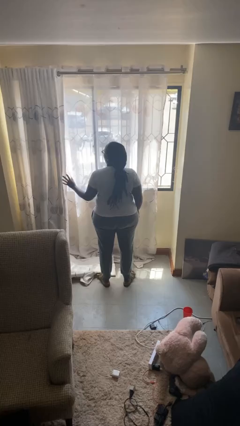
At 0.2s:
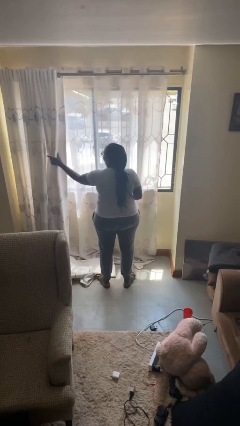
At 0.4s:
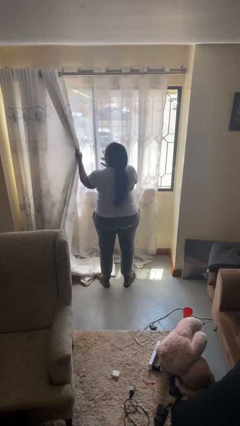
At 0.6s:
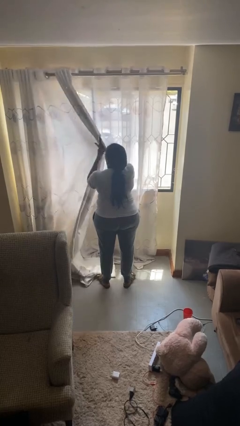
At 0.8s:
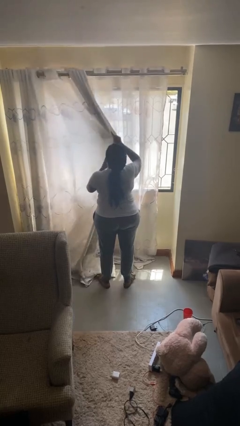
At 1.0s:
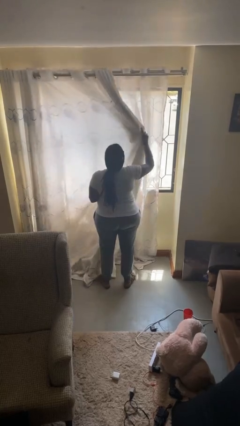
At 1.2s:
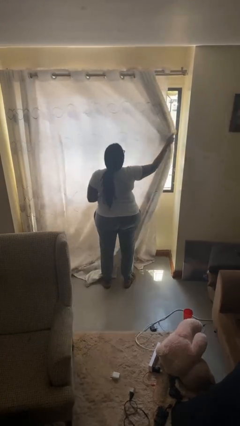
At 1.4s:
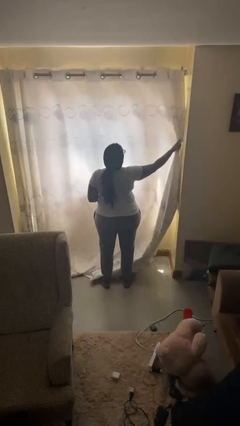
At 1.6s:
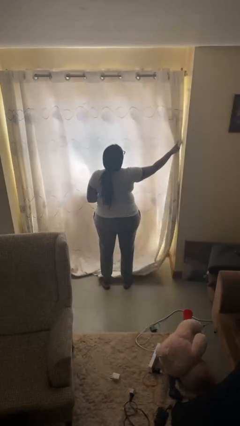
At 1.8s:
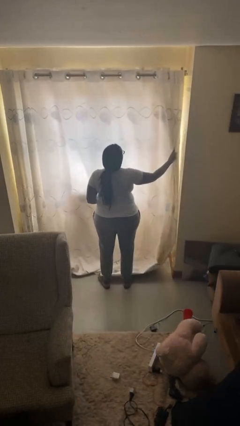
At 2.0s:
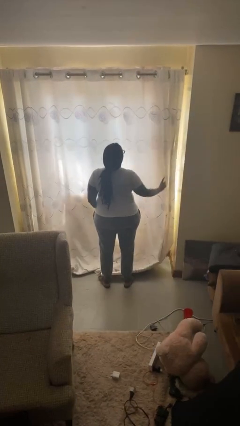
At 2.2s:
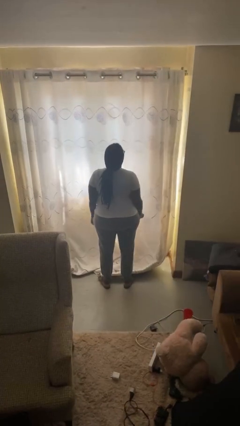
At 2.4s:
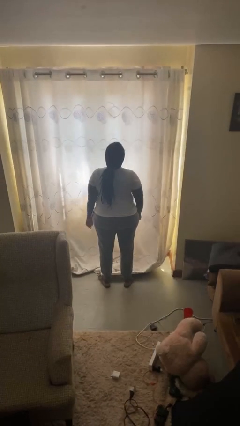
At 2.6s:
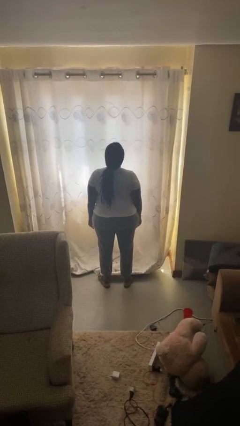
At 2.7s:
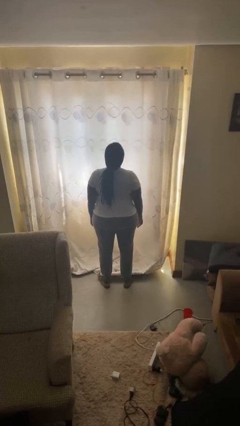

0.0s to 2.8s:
person closes curtains

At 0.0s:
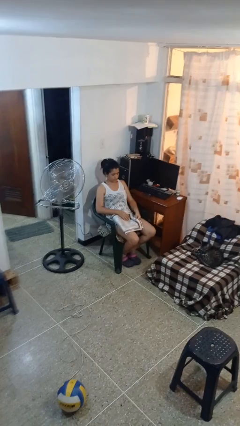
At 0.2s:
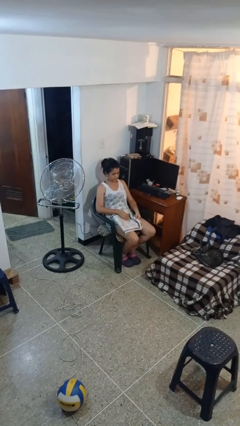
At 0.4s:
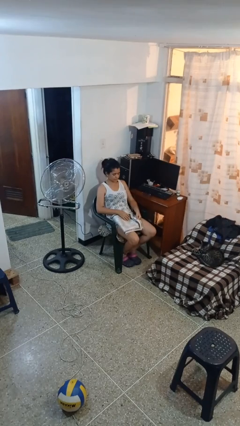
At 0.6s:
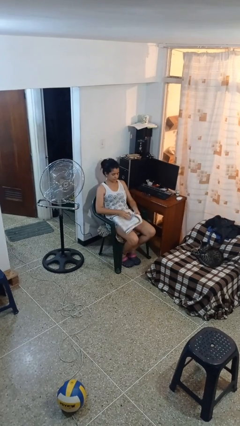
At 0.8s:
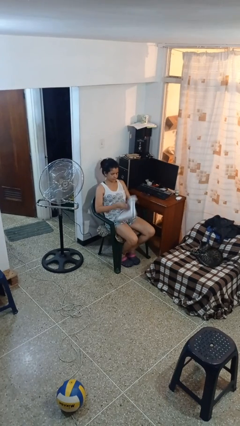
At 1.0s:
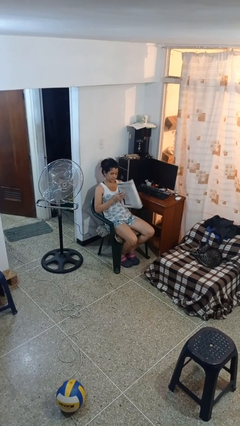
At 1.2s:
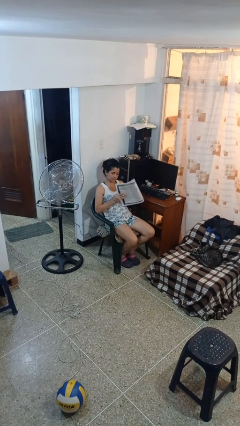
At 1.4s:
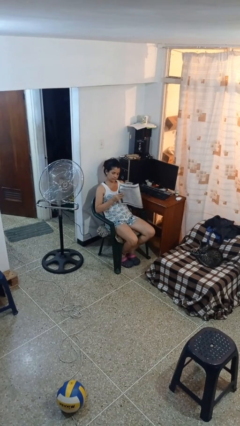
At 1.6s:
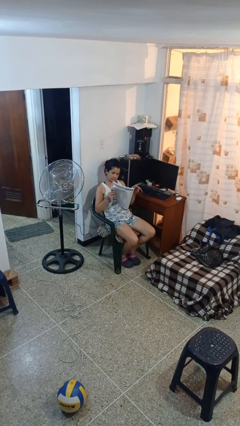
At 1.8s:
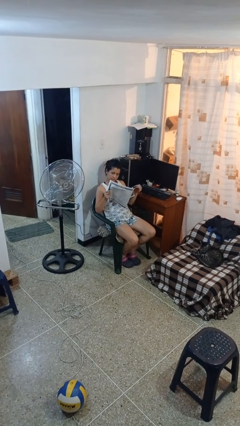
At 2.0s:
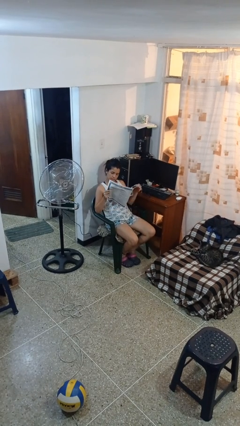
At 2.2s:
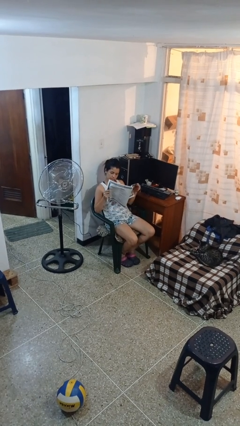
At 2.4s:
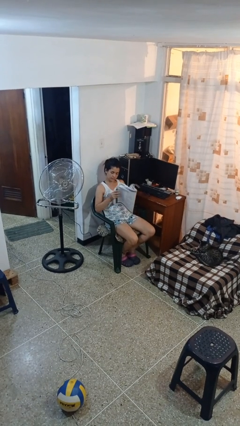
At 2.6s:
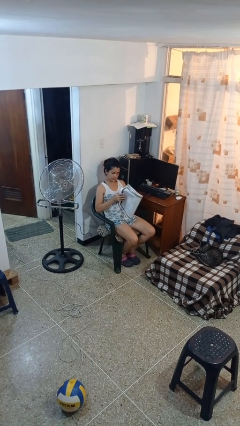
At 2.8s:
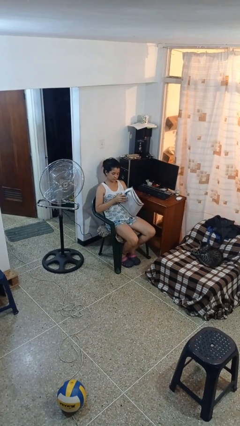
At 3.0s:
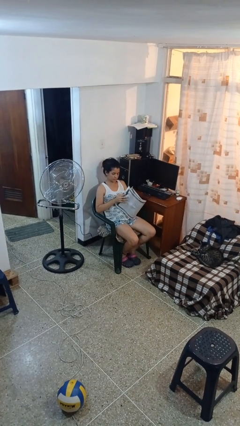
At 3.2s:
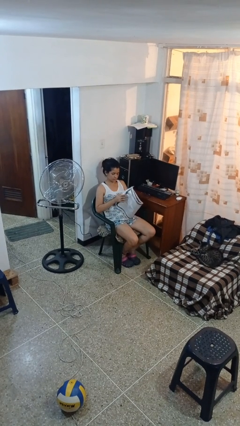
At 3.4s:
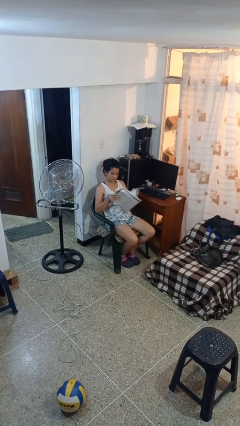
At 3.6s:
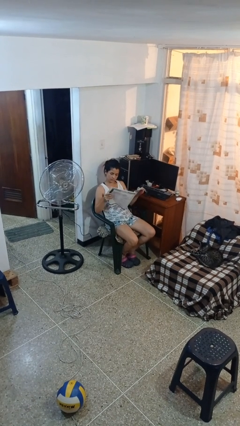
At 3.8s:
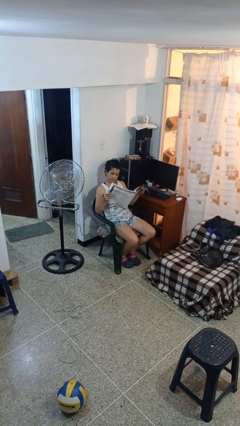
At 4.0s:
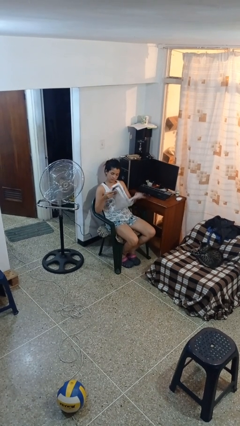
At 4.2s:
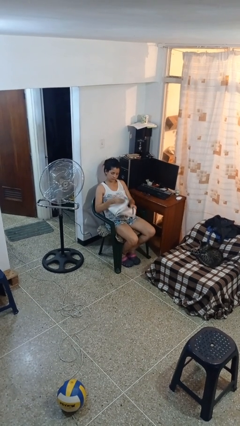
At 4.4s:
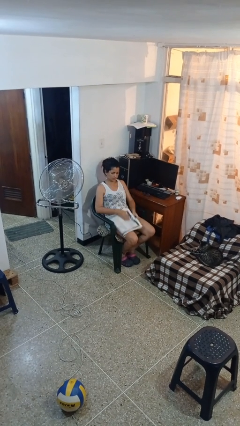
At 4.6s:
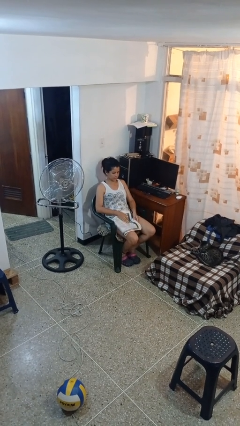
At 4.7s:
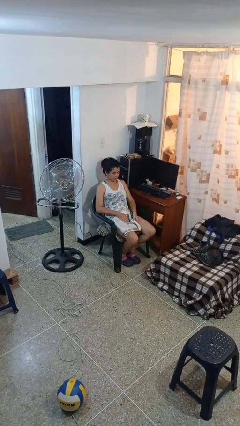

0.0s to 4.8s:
person reads newspaper

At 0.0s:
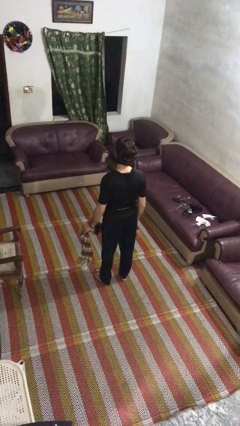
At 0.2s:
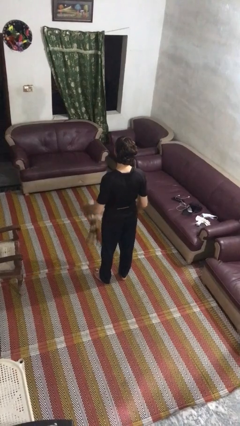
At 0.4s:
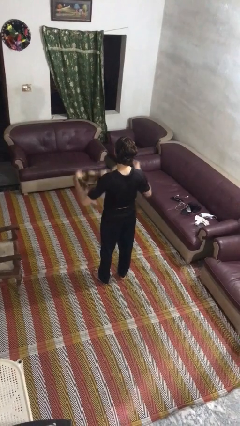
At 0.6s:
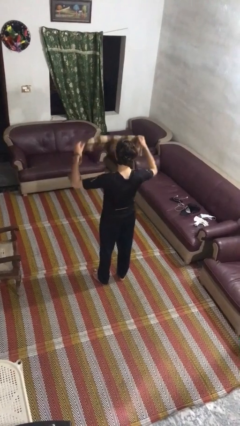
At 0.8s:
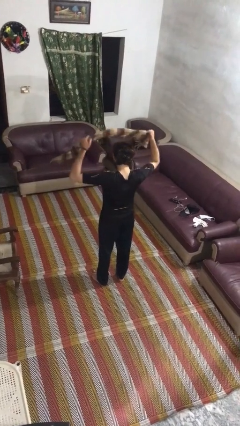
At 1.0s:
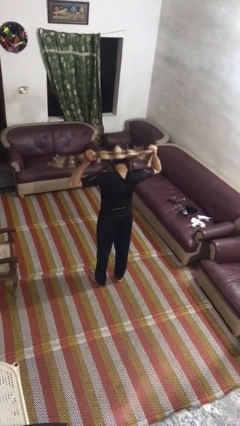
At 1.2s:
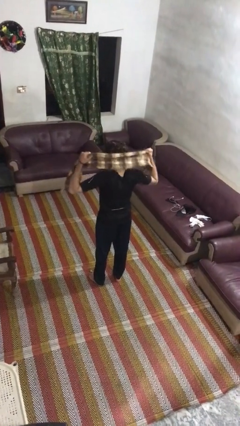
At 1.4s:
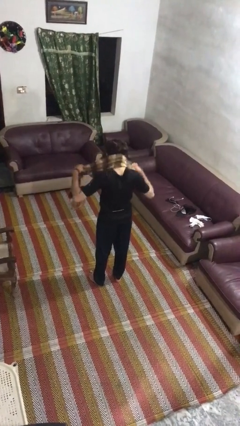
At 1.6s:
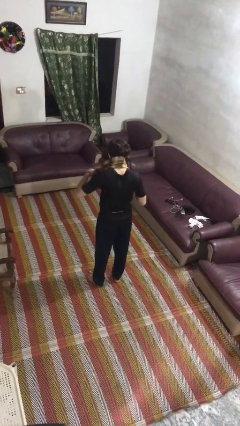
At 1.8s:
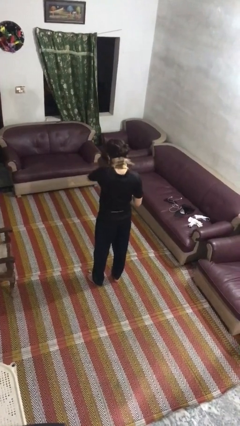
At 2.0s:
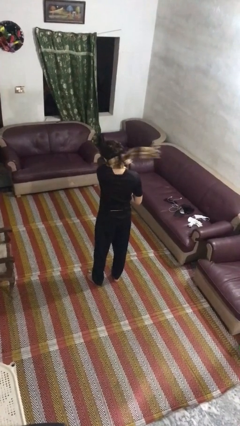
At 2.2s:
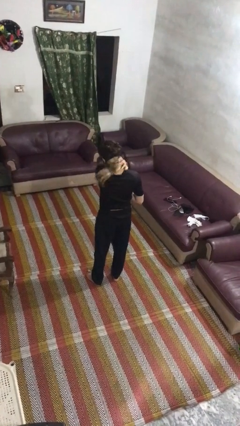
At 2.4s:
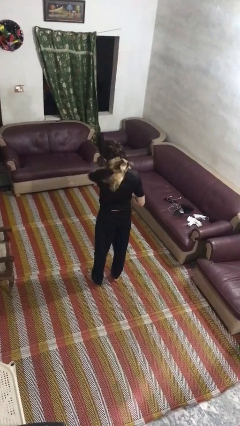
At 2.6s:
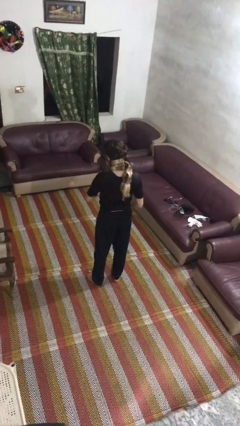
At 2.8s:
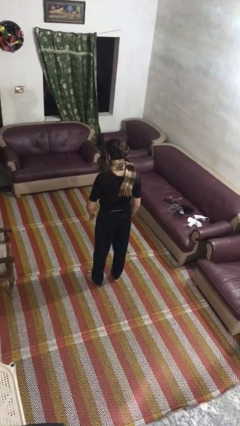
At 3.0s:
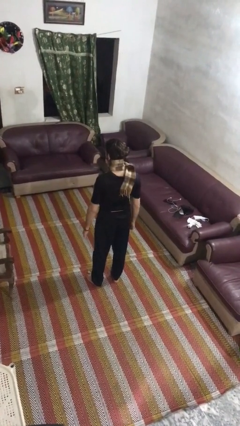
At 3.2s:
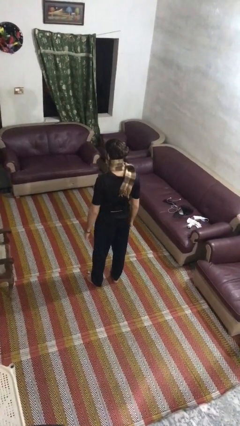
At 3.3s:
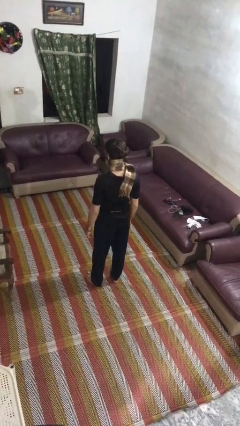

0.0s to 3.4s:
person puts on scarf

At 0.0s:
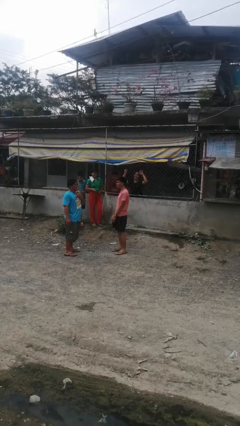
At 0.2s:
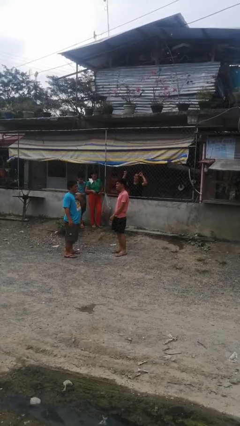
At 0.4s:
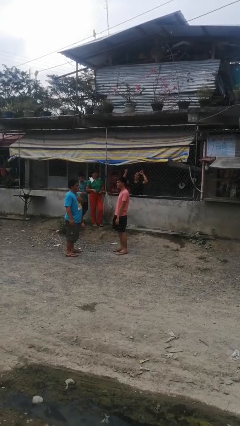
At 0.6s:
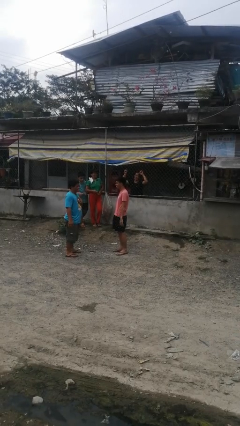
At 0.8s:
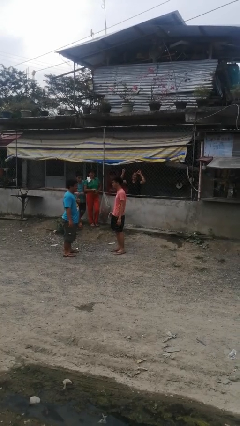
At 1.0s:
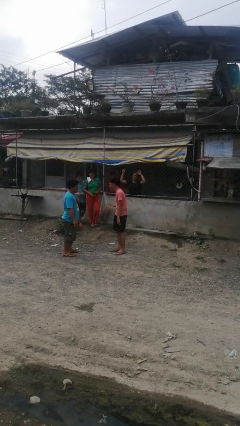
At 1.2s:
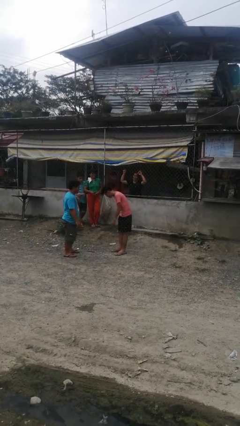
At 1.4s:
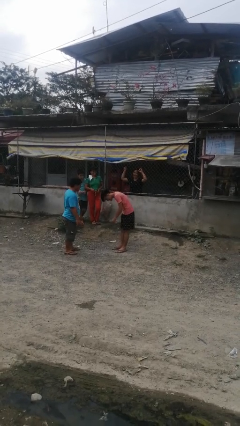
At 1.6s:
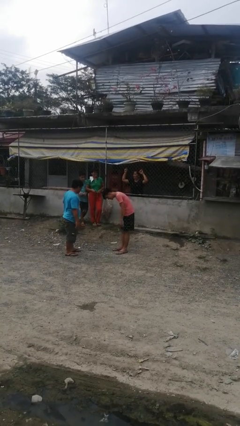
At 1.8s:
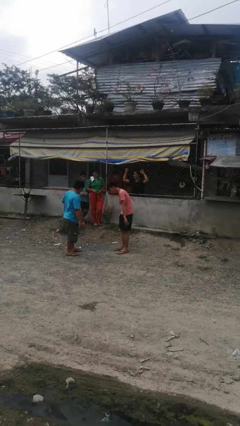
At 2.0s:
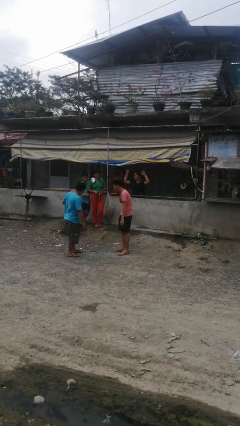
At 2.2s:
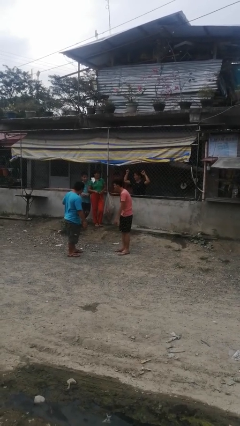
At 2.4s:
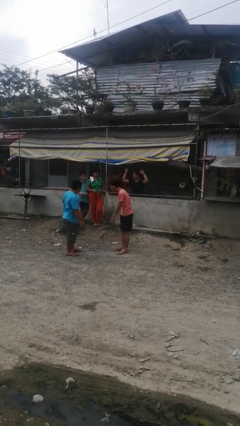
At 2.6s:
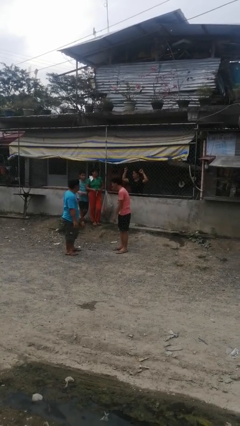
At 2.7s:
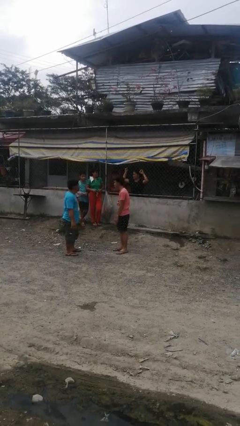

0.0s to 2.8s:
person laughs with person

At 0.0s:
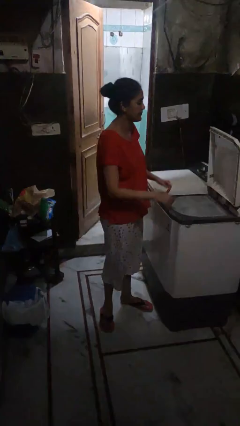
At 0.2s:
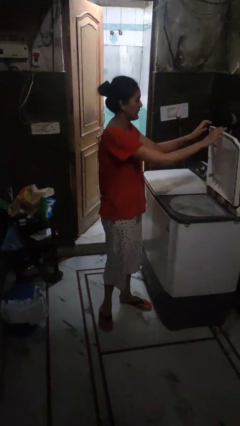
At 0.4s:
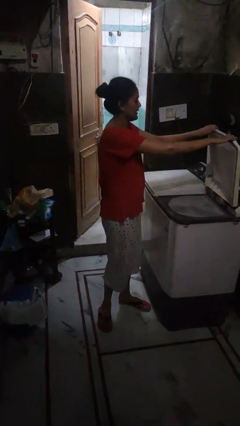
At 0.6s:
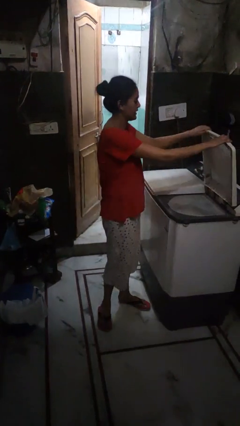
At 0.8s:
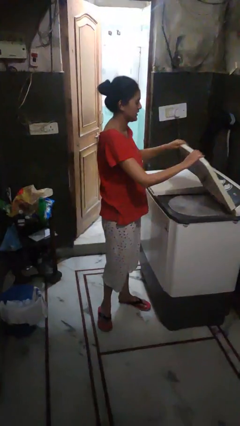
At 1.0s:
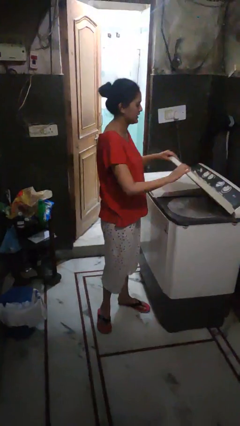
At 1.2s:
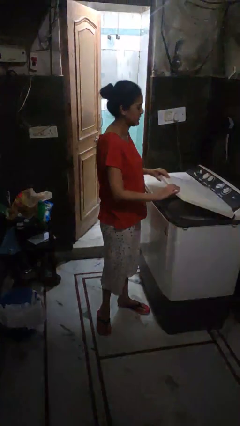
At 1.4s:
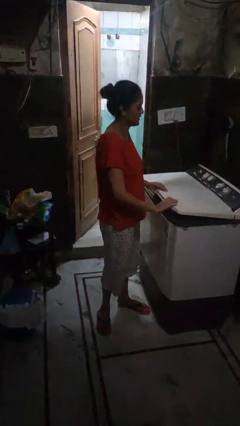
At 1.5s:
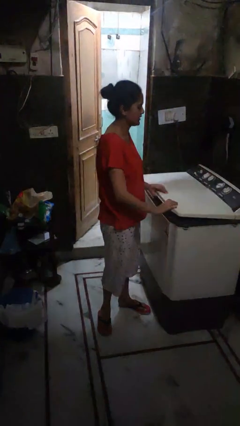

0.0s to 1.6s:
person closes clothes washer

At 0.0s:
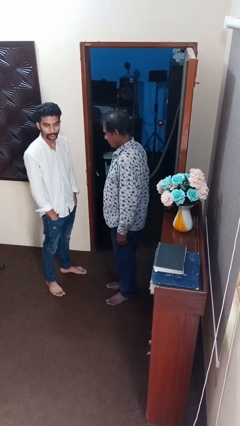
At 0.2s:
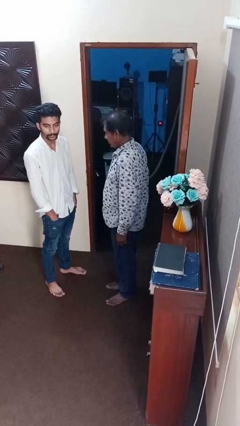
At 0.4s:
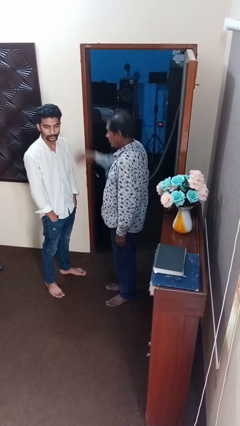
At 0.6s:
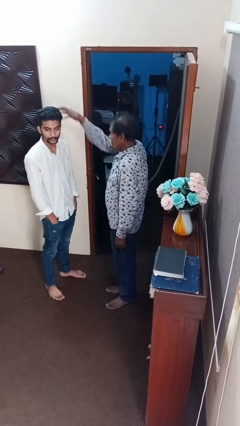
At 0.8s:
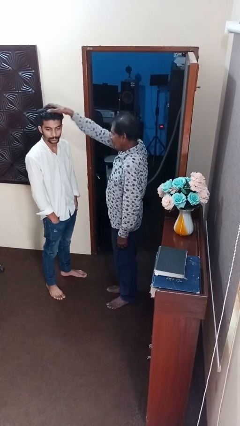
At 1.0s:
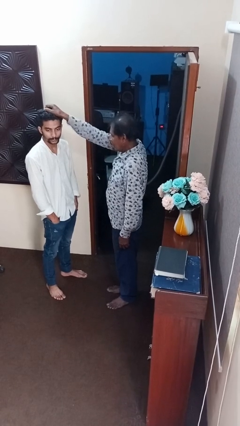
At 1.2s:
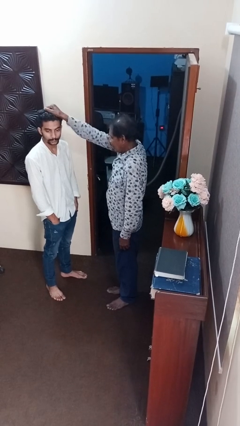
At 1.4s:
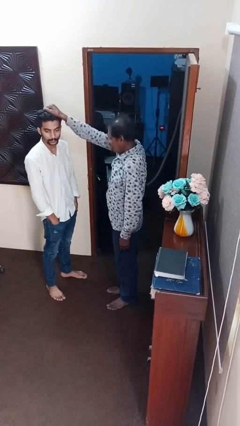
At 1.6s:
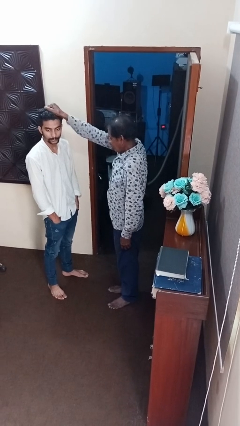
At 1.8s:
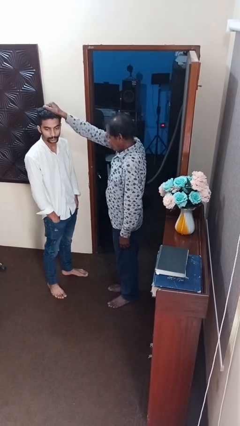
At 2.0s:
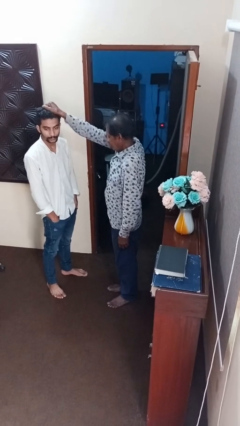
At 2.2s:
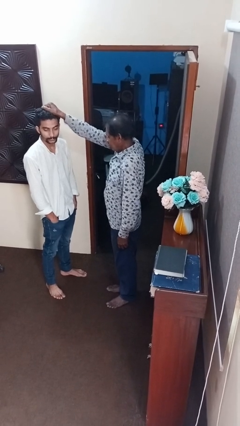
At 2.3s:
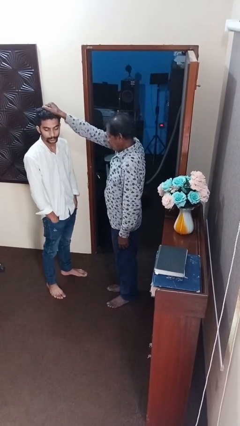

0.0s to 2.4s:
person grabs person by hair
